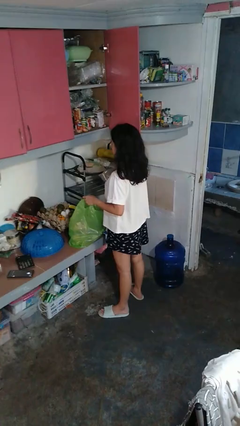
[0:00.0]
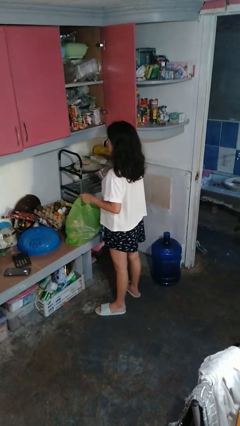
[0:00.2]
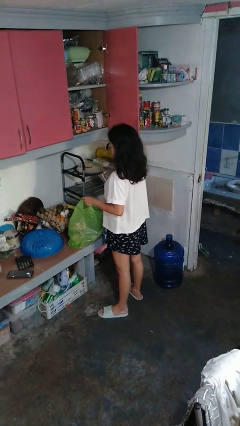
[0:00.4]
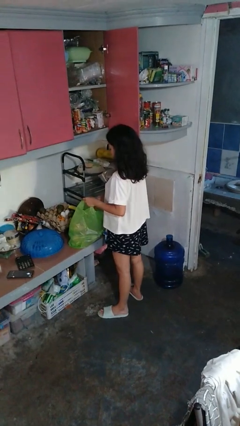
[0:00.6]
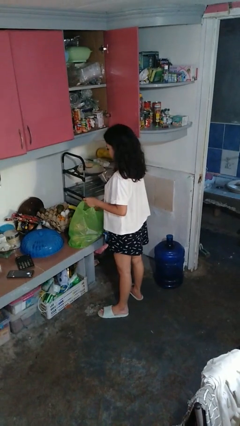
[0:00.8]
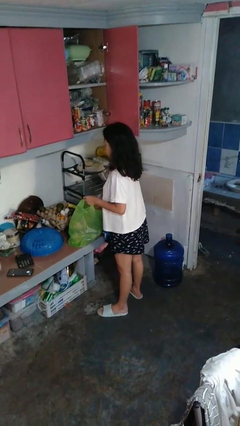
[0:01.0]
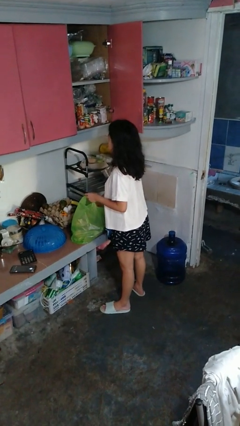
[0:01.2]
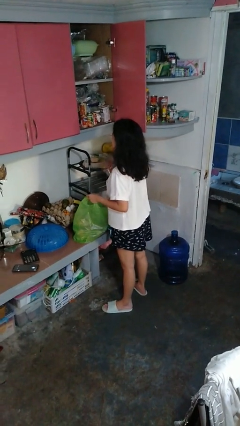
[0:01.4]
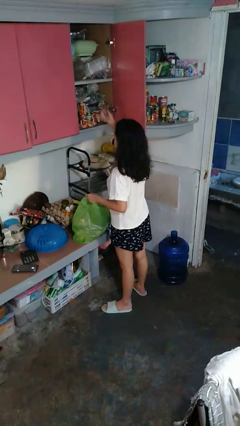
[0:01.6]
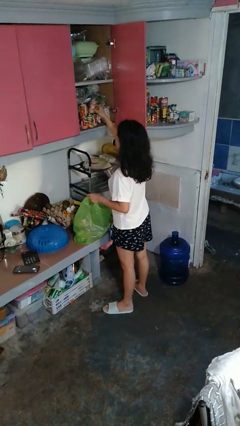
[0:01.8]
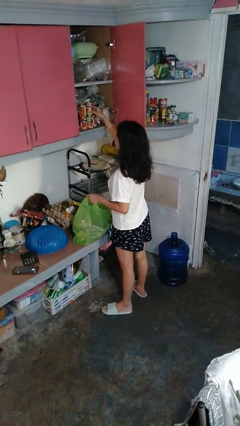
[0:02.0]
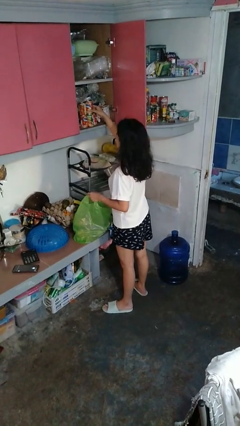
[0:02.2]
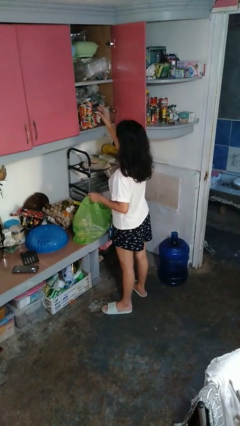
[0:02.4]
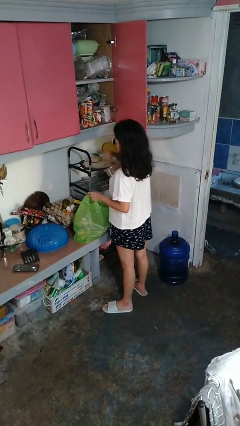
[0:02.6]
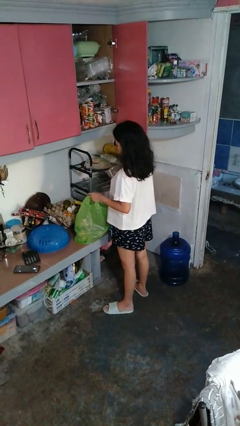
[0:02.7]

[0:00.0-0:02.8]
person loads groceries into cabinet

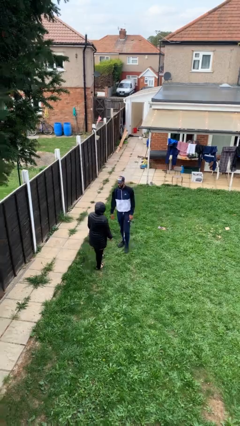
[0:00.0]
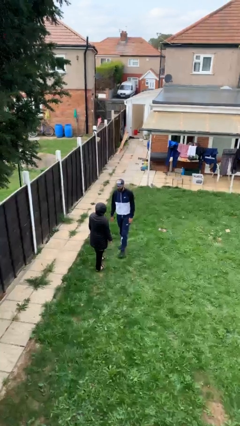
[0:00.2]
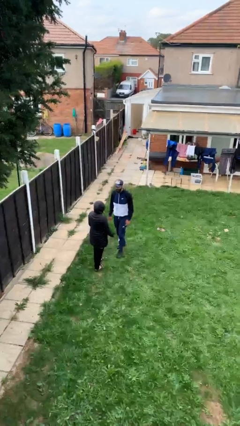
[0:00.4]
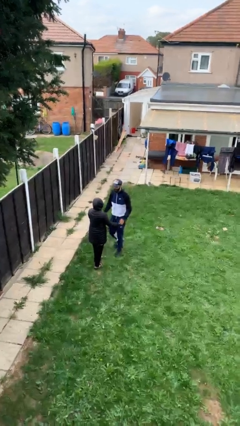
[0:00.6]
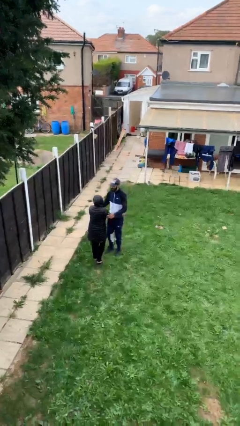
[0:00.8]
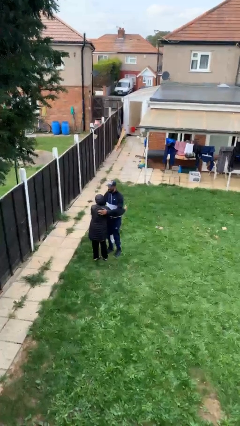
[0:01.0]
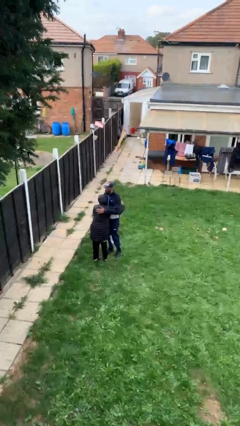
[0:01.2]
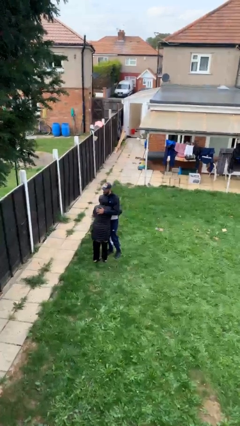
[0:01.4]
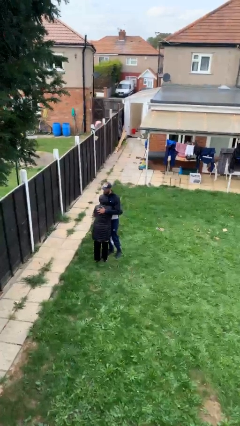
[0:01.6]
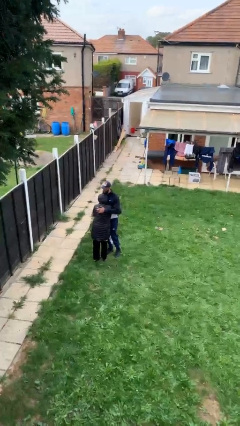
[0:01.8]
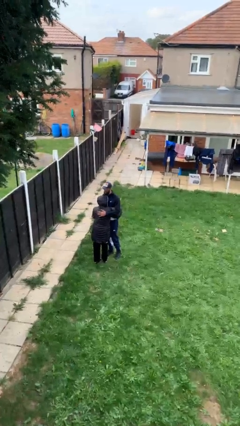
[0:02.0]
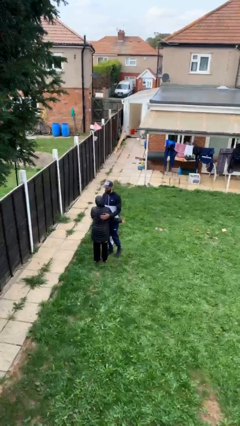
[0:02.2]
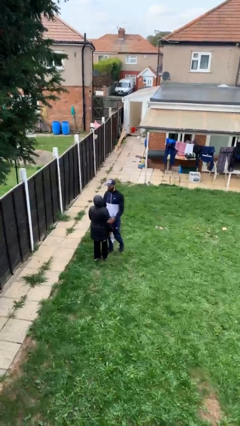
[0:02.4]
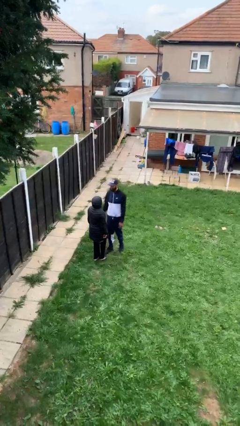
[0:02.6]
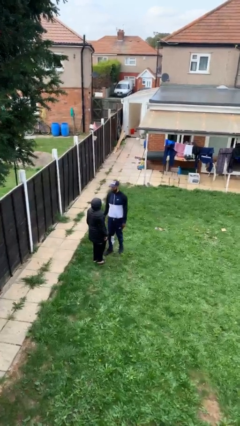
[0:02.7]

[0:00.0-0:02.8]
person embraces person

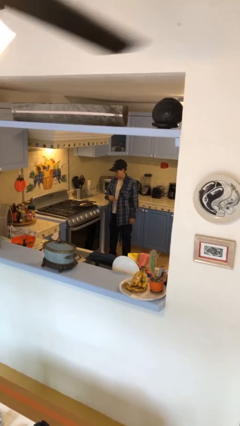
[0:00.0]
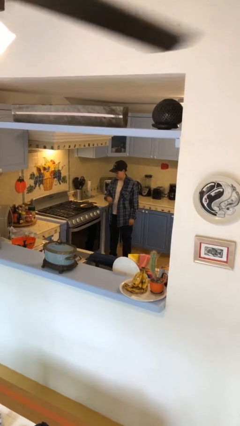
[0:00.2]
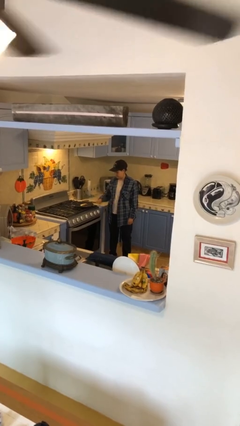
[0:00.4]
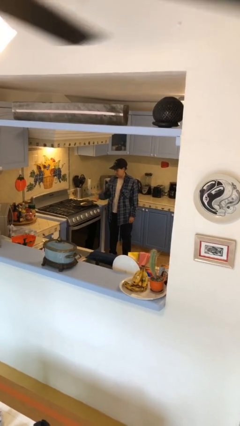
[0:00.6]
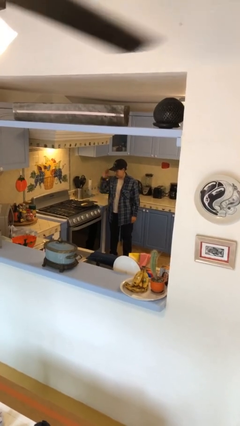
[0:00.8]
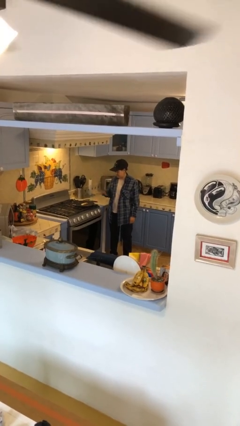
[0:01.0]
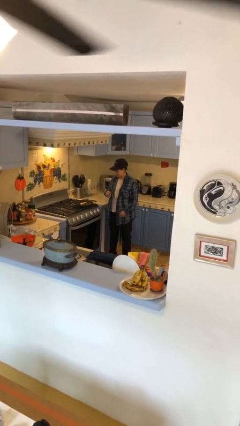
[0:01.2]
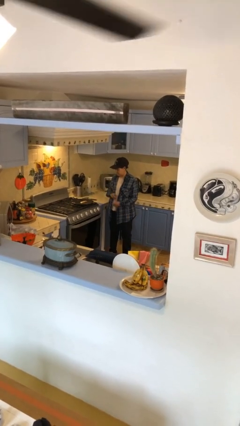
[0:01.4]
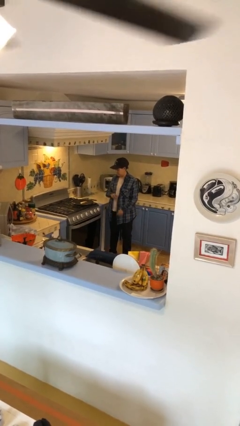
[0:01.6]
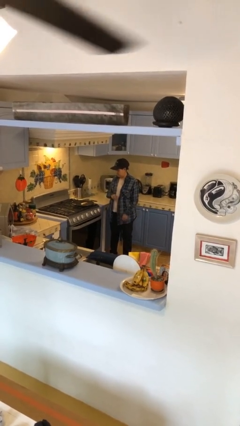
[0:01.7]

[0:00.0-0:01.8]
person burns hand

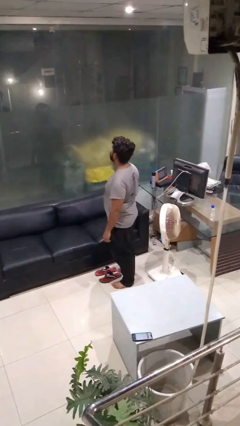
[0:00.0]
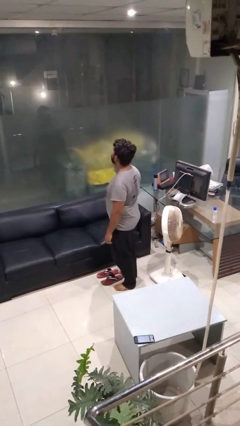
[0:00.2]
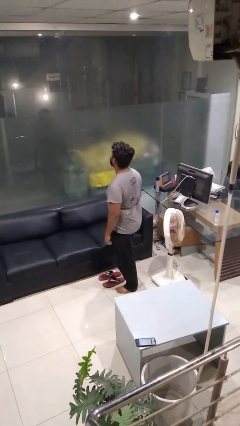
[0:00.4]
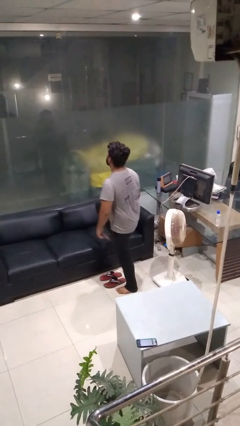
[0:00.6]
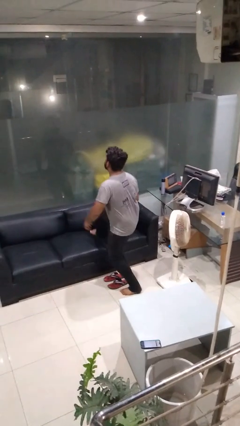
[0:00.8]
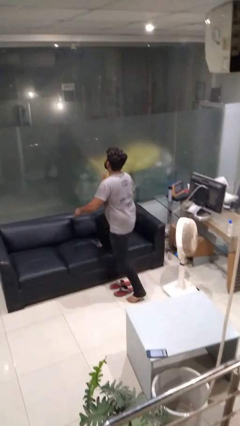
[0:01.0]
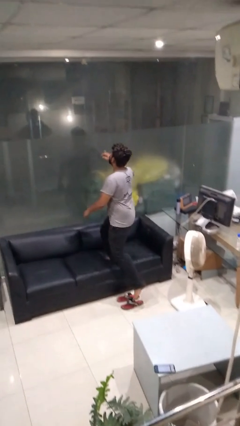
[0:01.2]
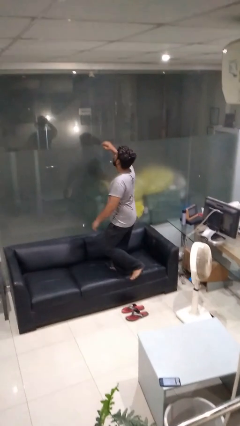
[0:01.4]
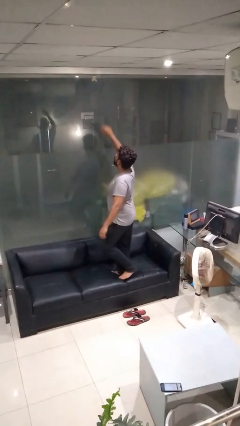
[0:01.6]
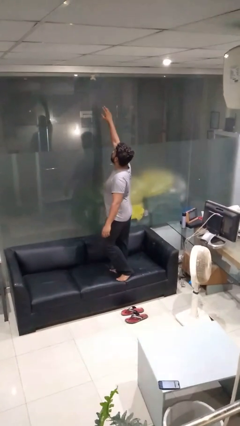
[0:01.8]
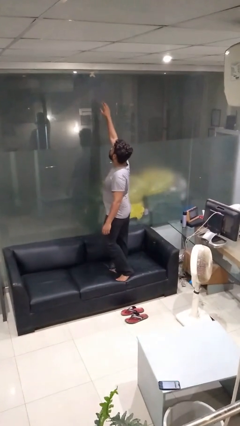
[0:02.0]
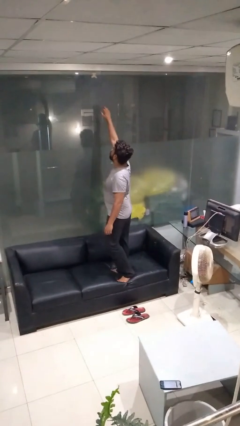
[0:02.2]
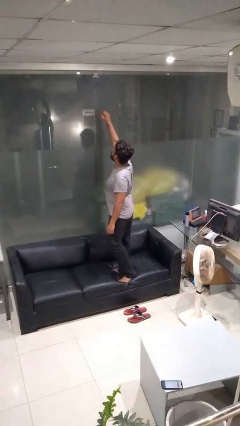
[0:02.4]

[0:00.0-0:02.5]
person climbs on couch

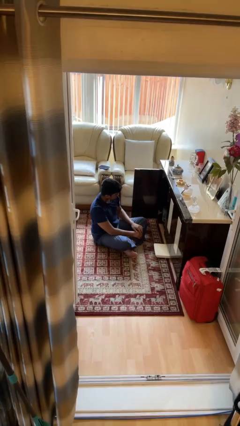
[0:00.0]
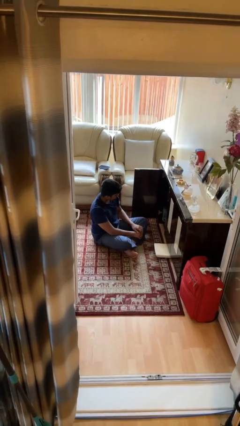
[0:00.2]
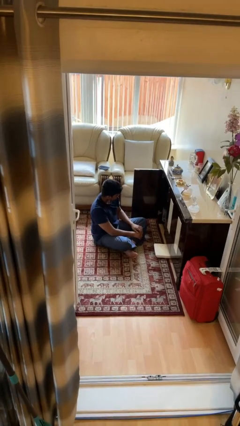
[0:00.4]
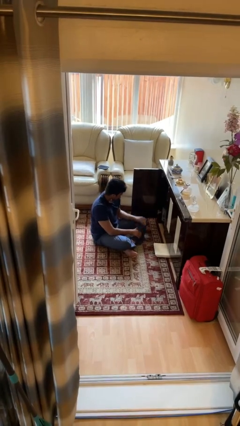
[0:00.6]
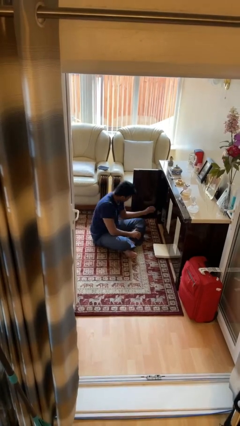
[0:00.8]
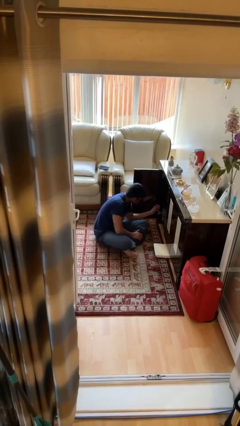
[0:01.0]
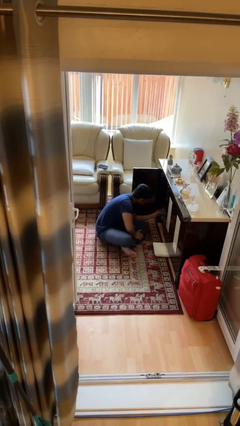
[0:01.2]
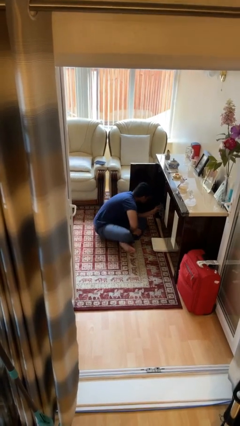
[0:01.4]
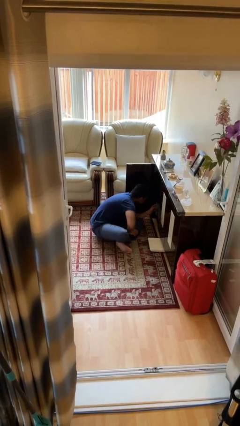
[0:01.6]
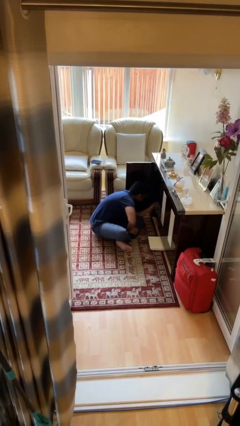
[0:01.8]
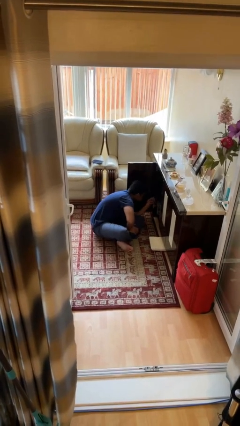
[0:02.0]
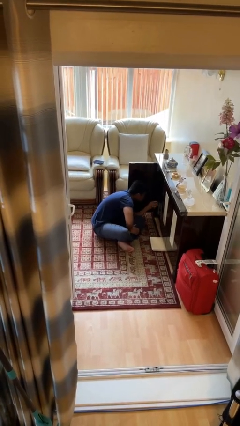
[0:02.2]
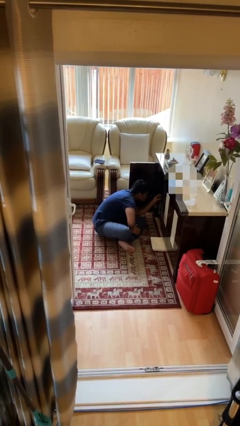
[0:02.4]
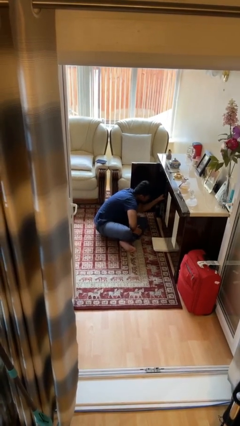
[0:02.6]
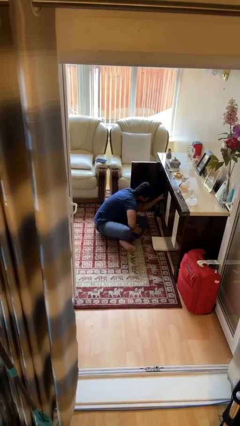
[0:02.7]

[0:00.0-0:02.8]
person searches in cabinet

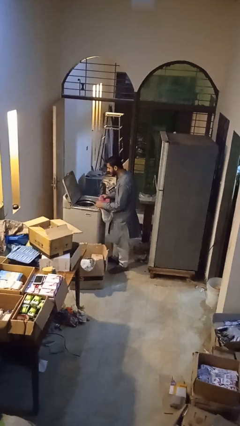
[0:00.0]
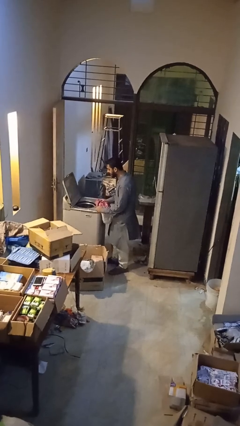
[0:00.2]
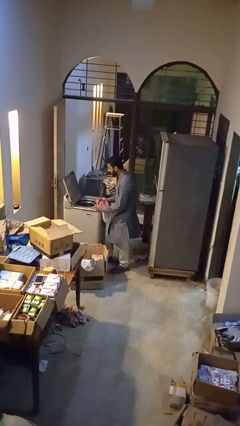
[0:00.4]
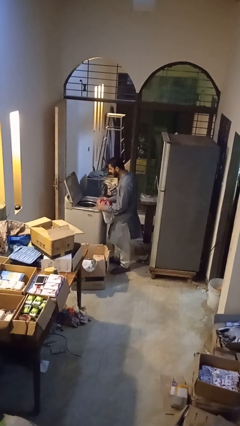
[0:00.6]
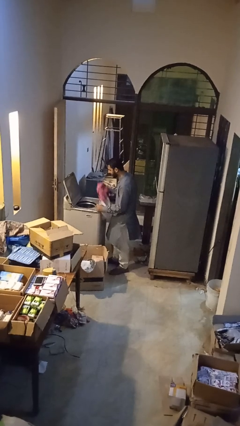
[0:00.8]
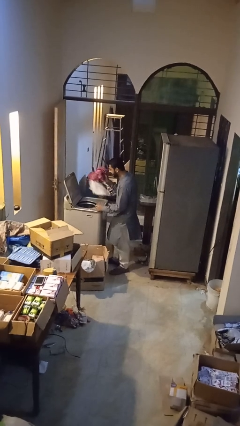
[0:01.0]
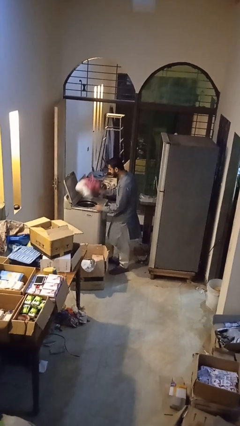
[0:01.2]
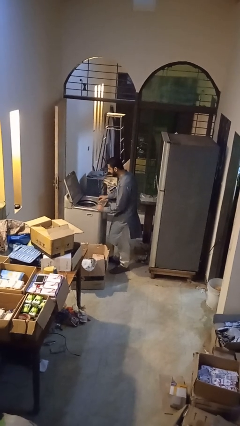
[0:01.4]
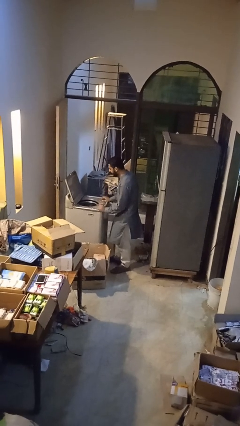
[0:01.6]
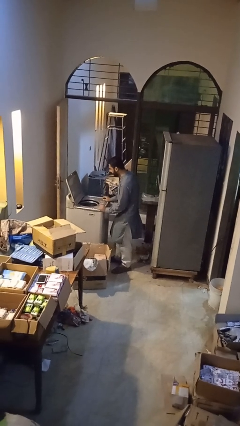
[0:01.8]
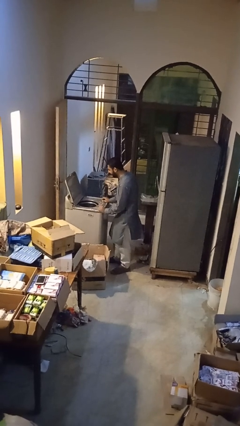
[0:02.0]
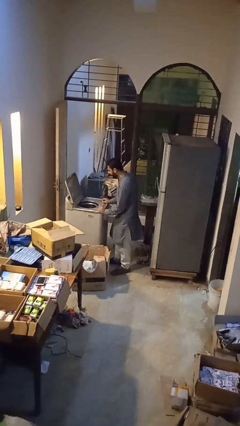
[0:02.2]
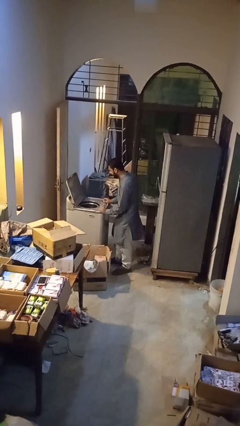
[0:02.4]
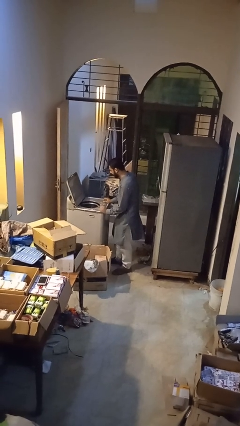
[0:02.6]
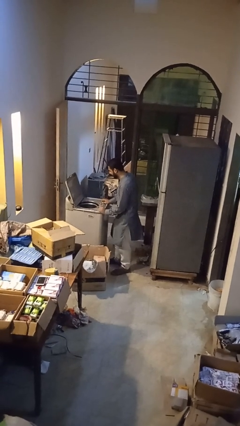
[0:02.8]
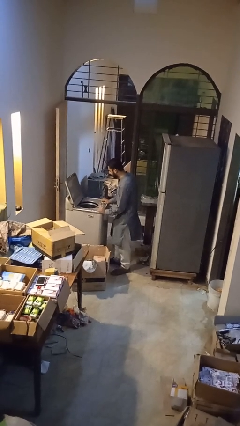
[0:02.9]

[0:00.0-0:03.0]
person loads dryer

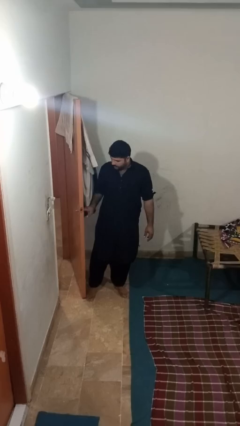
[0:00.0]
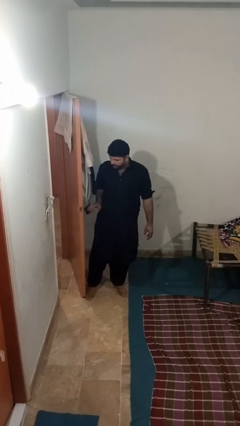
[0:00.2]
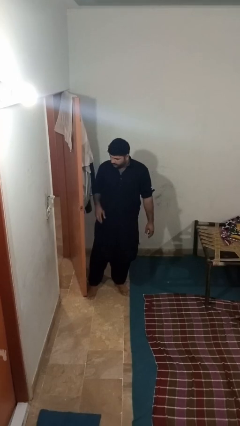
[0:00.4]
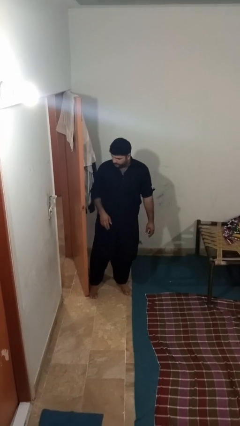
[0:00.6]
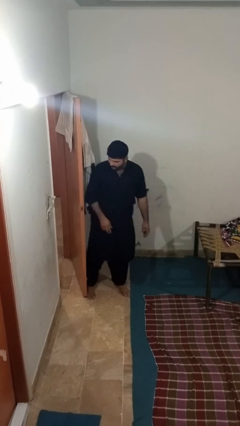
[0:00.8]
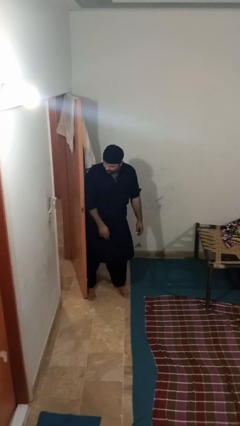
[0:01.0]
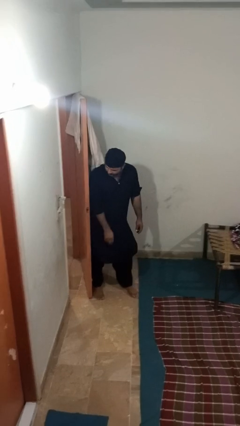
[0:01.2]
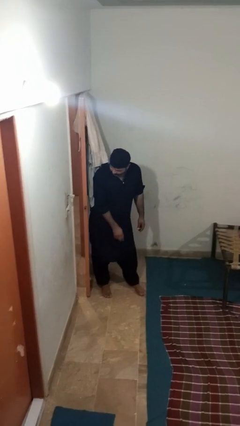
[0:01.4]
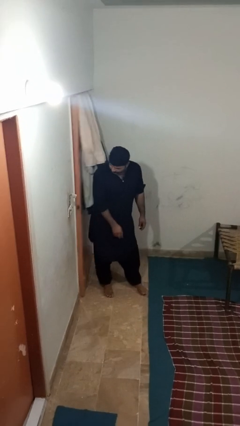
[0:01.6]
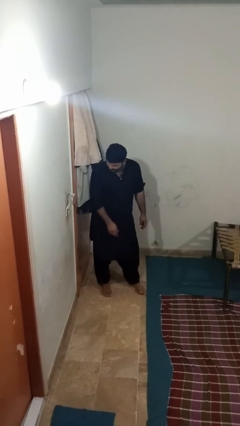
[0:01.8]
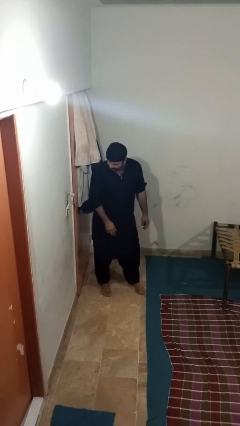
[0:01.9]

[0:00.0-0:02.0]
person closes door with hip
